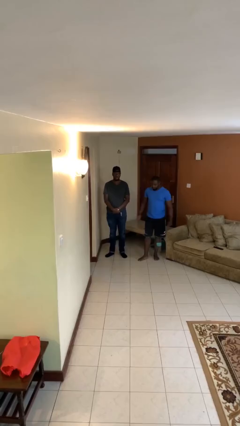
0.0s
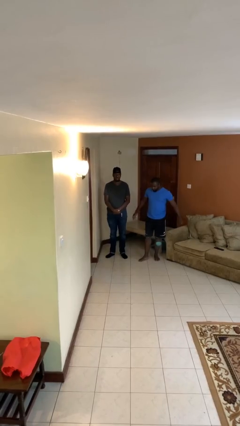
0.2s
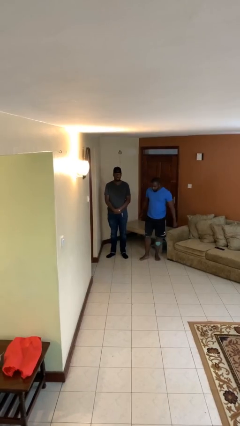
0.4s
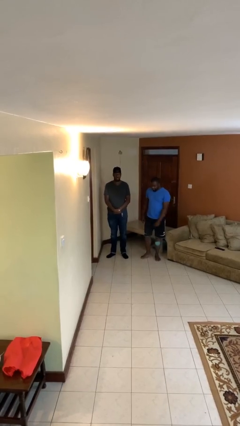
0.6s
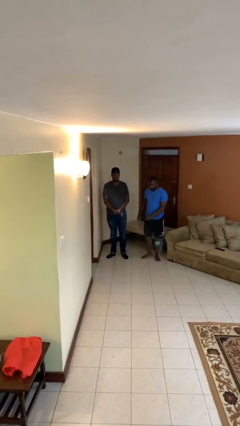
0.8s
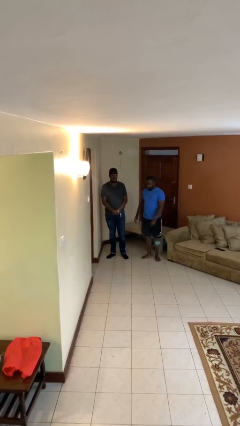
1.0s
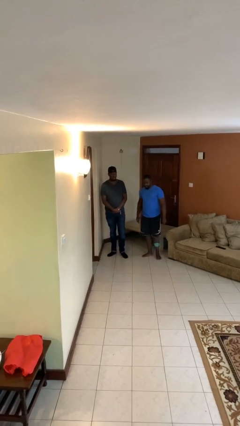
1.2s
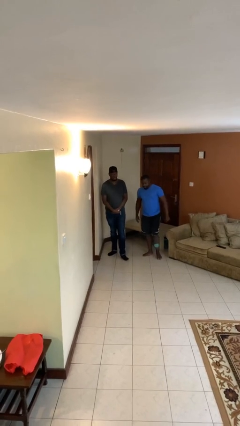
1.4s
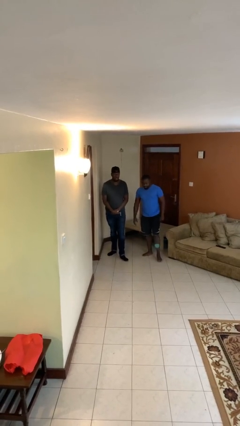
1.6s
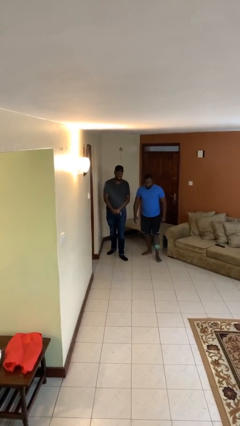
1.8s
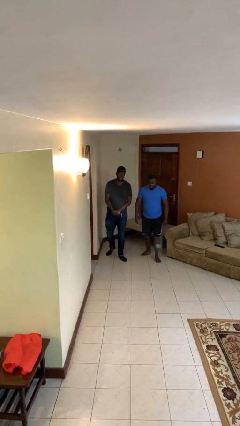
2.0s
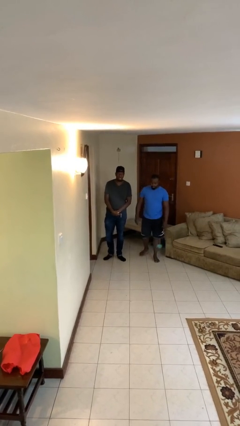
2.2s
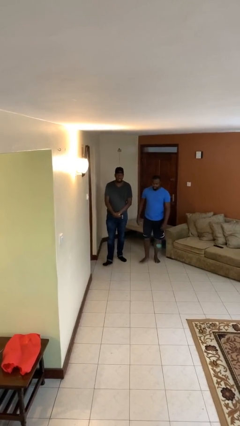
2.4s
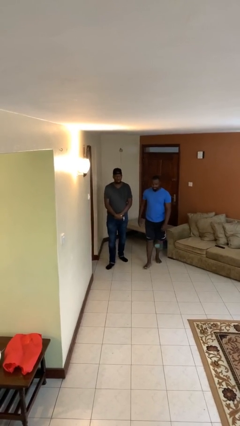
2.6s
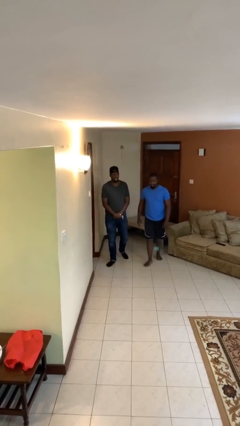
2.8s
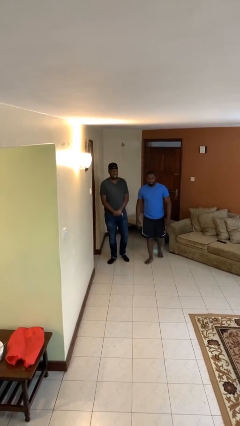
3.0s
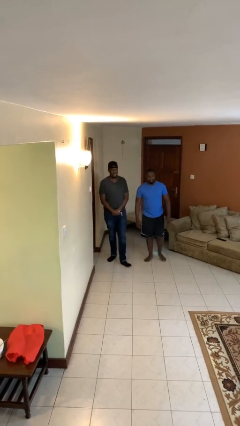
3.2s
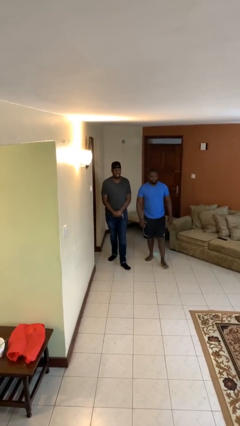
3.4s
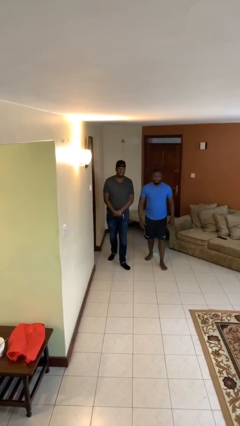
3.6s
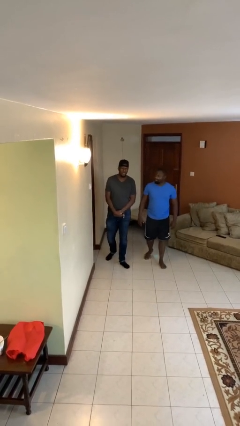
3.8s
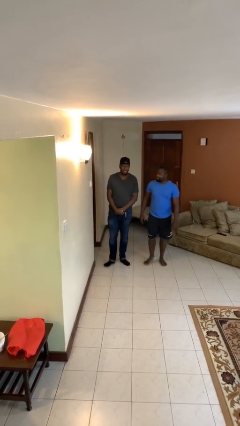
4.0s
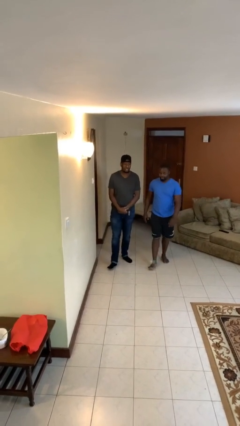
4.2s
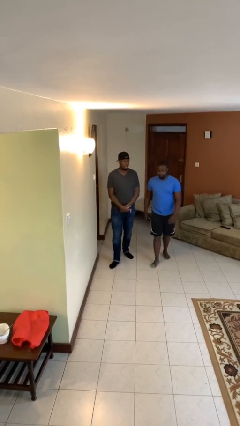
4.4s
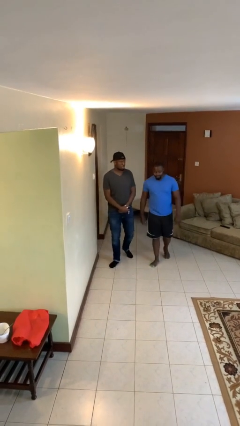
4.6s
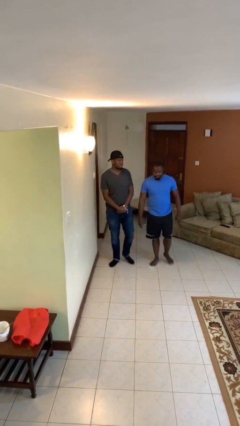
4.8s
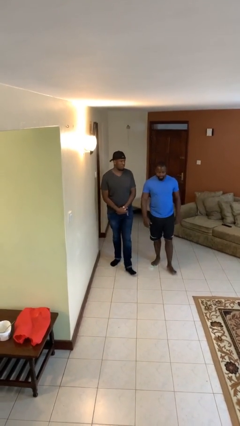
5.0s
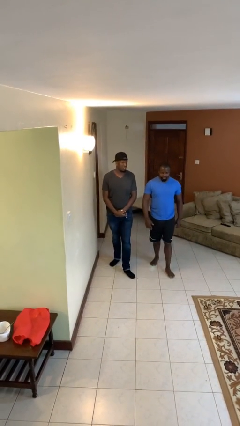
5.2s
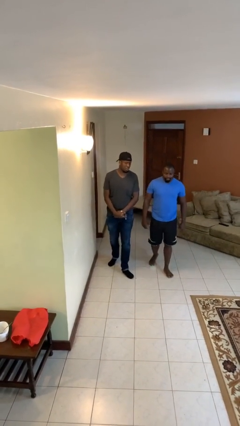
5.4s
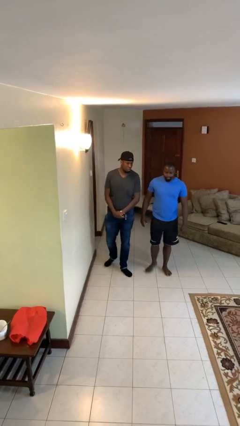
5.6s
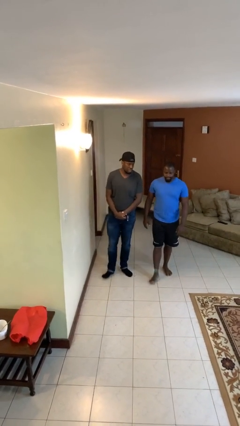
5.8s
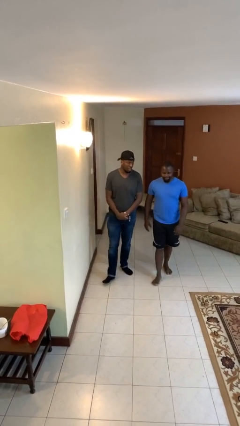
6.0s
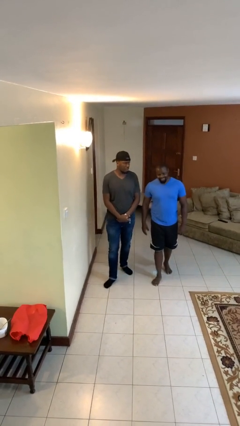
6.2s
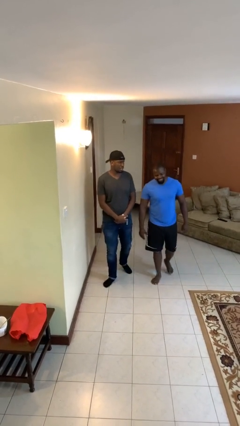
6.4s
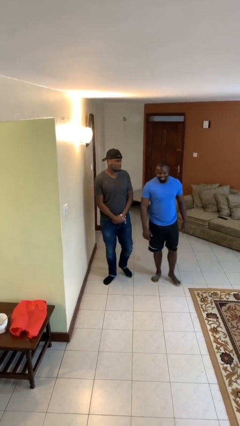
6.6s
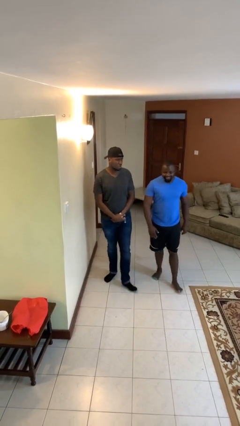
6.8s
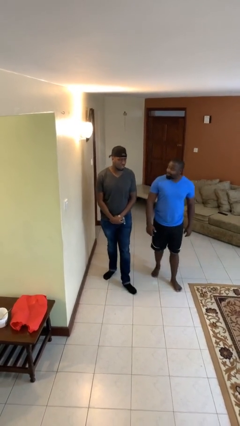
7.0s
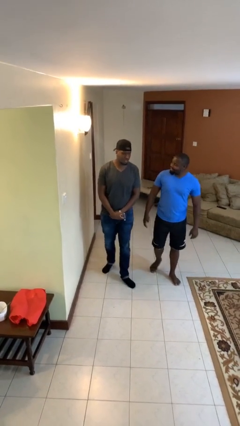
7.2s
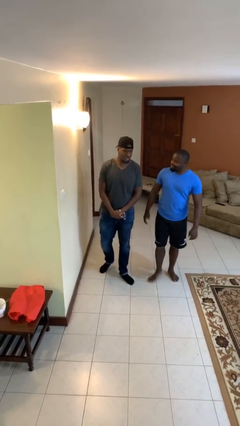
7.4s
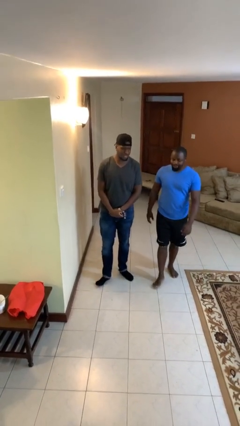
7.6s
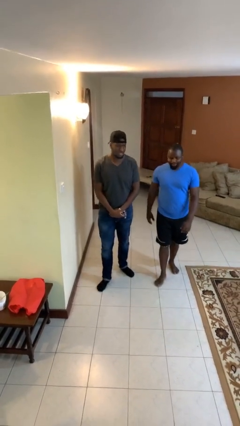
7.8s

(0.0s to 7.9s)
person talks to person

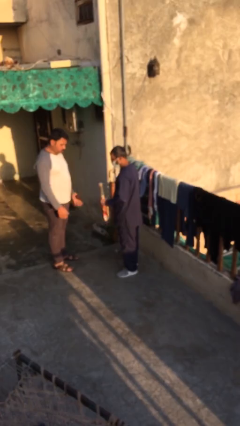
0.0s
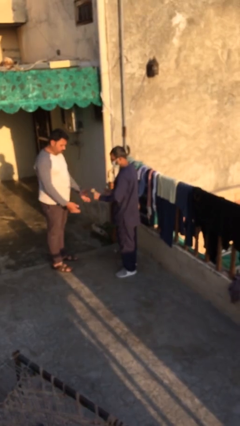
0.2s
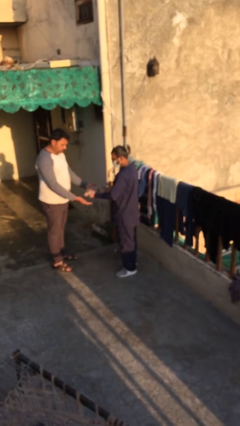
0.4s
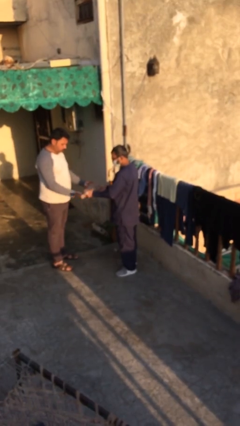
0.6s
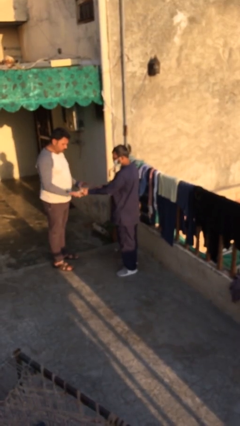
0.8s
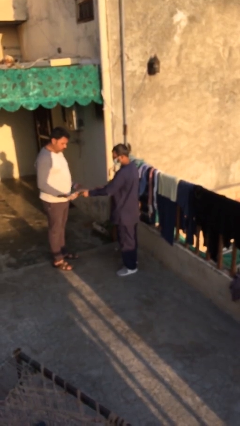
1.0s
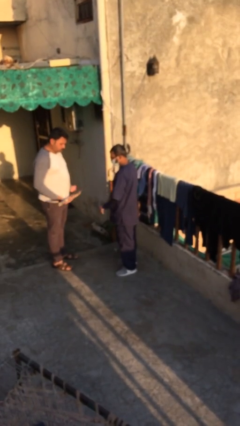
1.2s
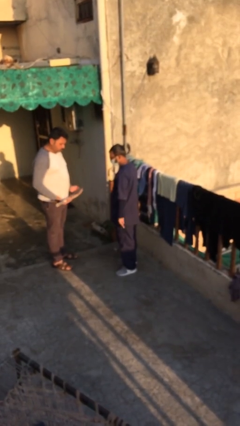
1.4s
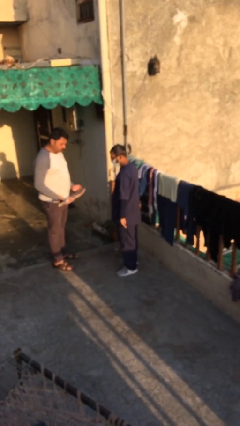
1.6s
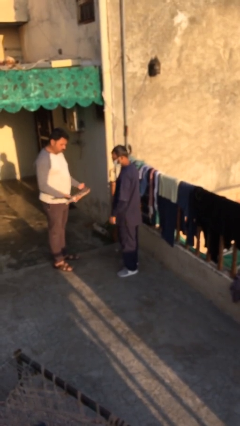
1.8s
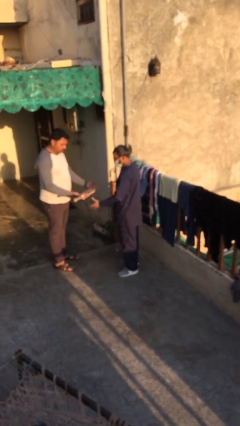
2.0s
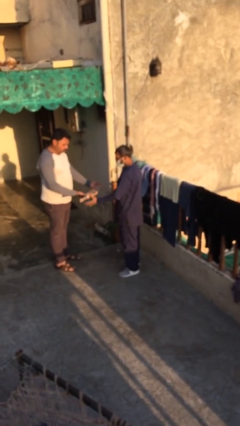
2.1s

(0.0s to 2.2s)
person transfers object to person

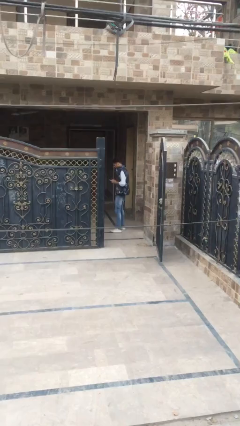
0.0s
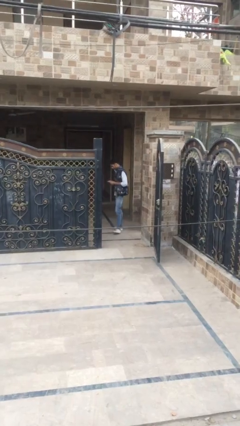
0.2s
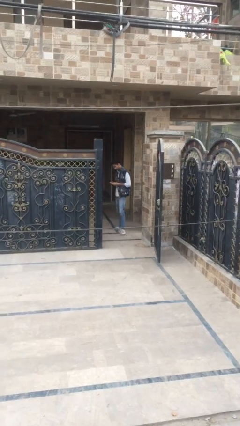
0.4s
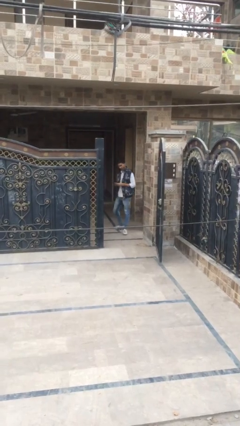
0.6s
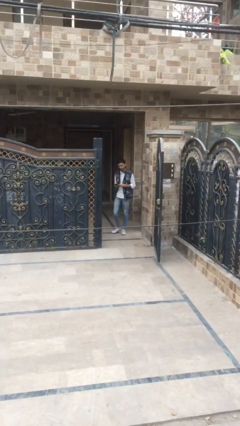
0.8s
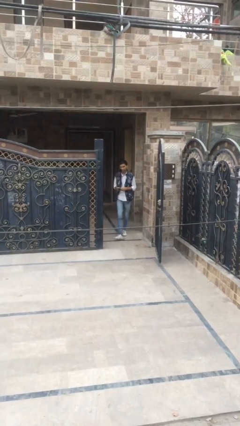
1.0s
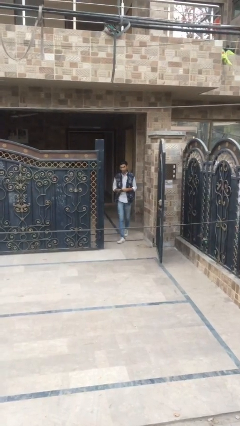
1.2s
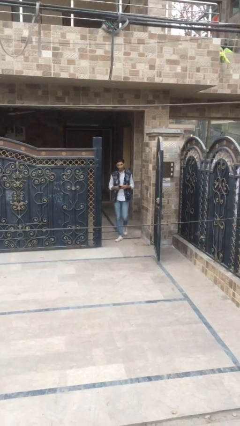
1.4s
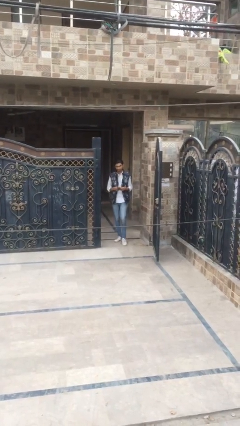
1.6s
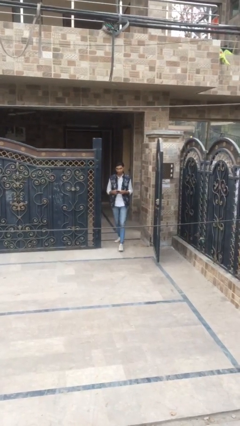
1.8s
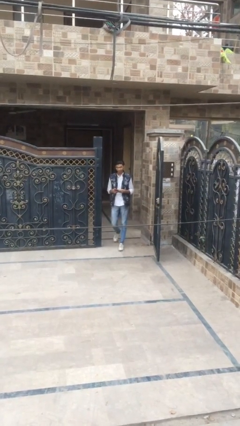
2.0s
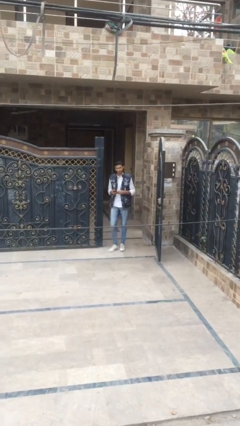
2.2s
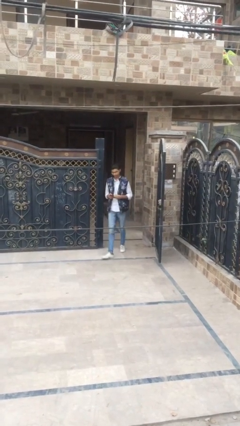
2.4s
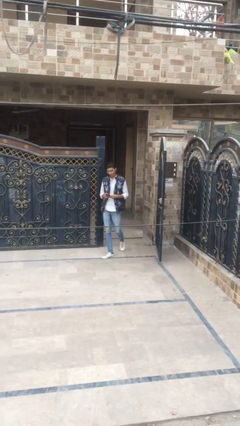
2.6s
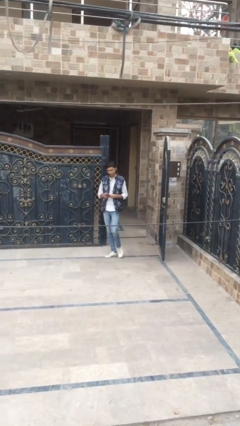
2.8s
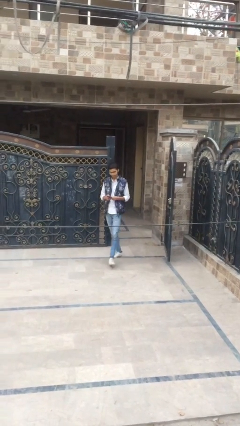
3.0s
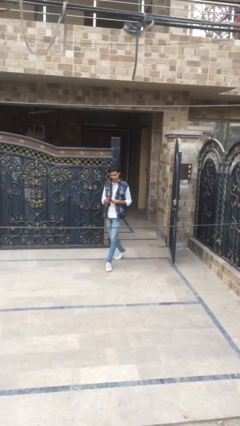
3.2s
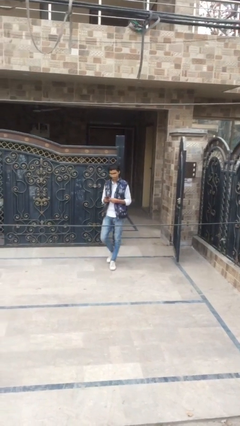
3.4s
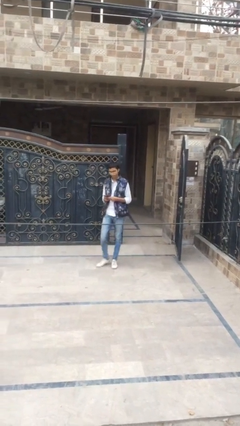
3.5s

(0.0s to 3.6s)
person exits scene through structure

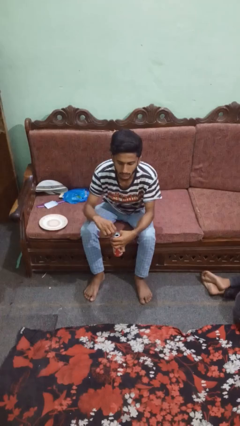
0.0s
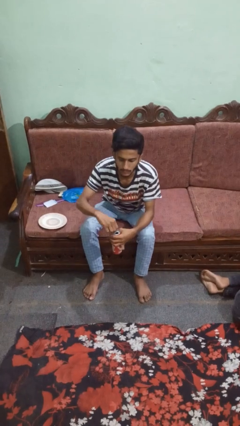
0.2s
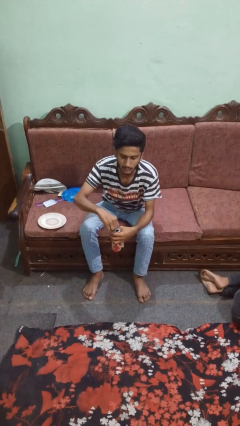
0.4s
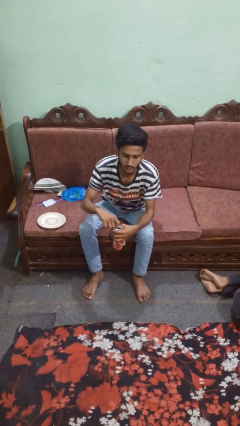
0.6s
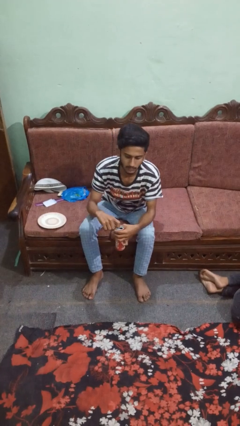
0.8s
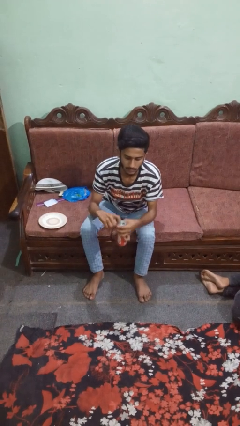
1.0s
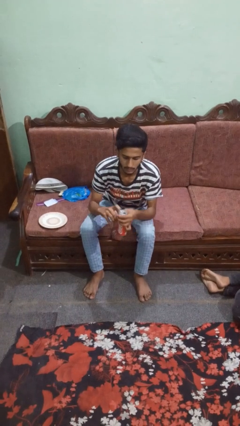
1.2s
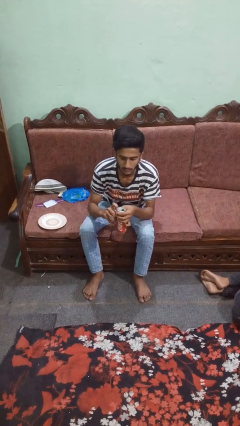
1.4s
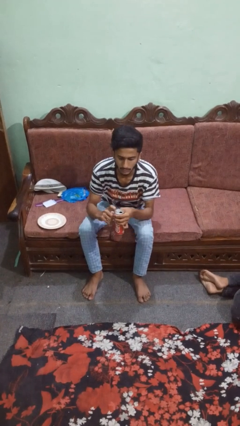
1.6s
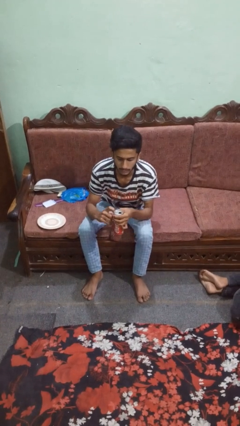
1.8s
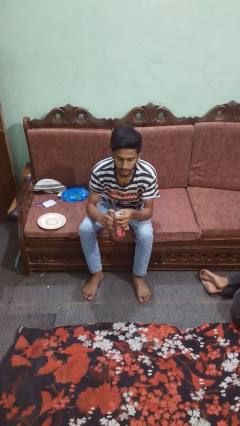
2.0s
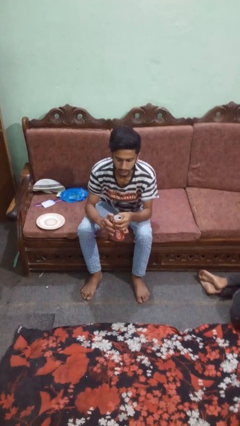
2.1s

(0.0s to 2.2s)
person opens beverage can

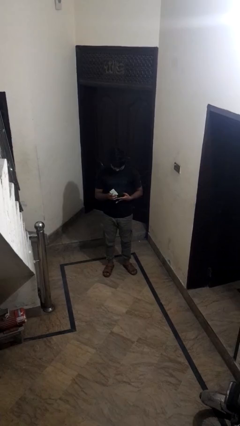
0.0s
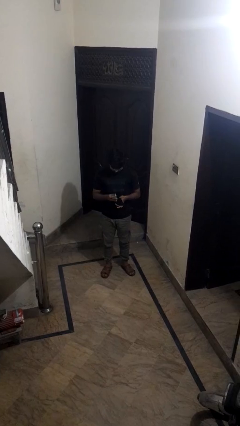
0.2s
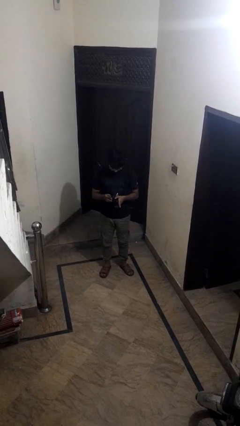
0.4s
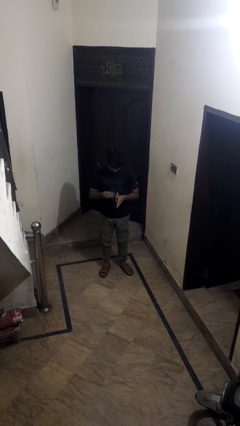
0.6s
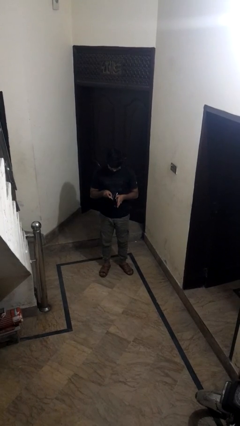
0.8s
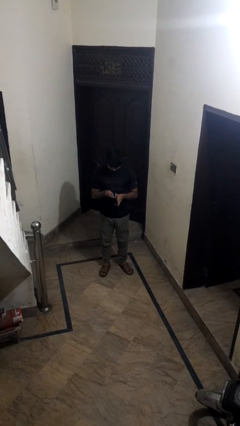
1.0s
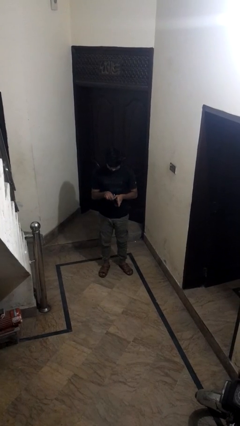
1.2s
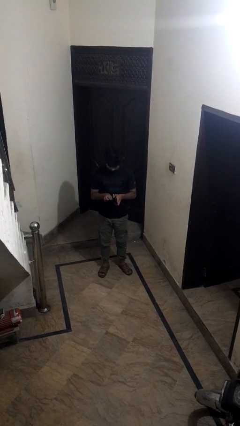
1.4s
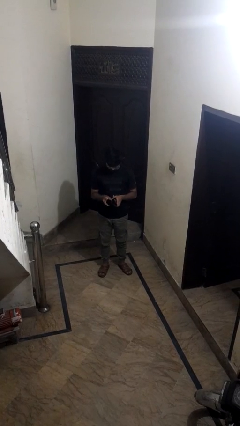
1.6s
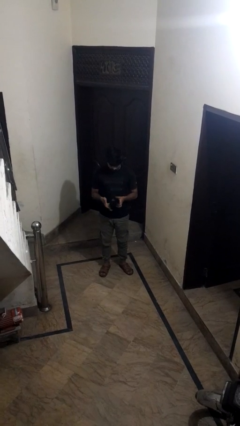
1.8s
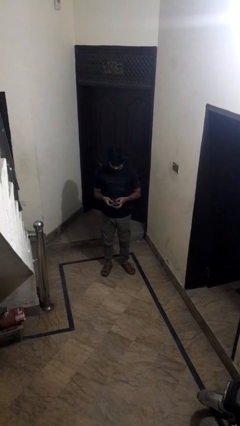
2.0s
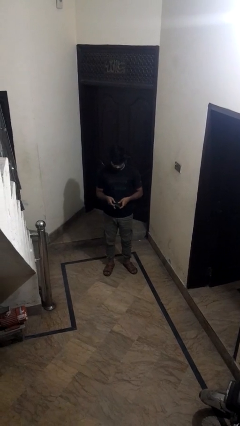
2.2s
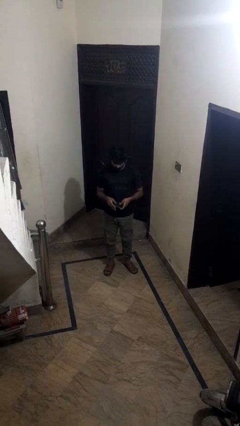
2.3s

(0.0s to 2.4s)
person puts object into purse
